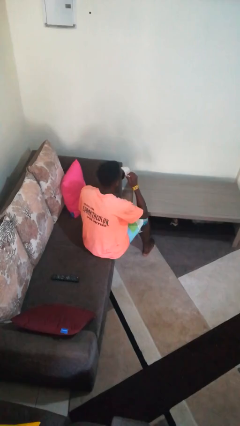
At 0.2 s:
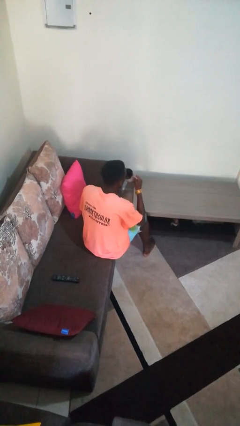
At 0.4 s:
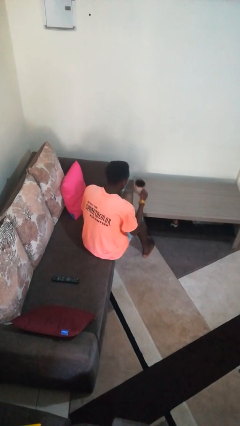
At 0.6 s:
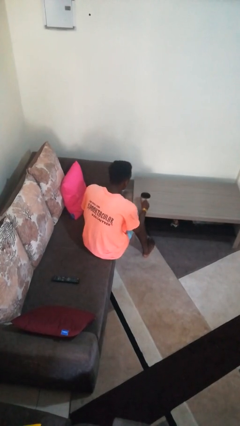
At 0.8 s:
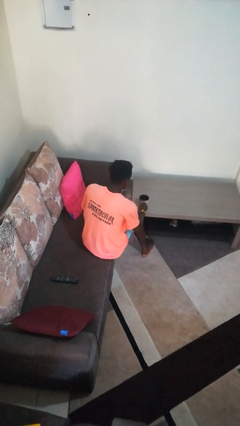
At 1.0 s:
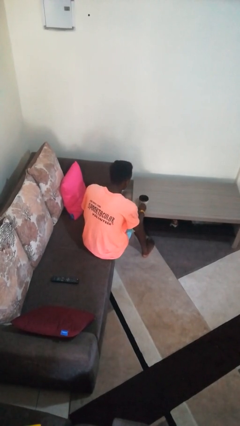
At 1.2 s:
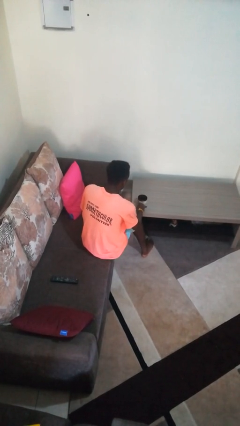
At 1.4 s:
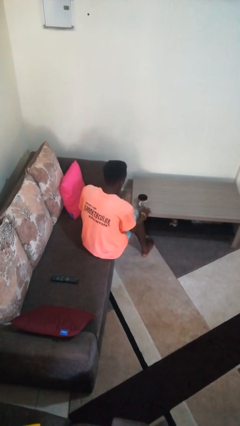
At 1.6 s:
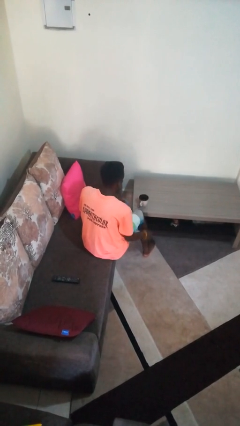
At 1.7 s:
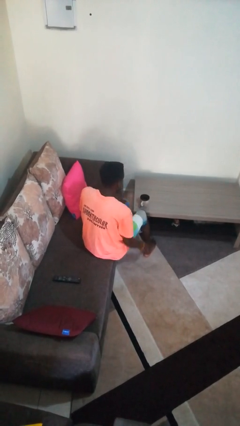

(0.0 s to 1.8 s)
person puts down object on table

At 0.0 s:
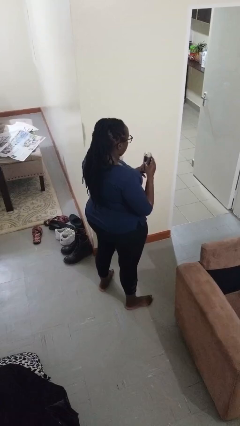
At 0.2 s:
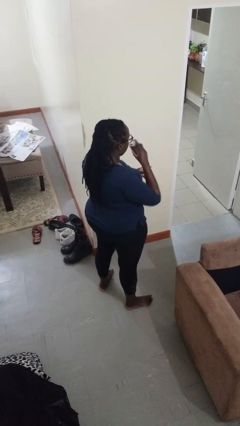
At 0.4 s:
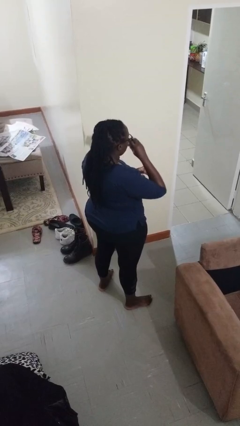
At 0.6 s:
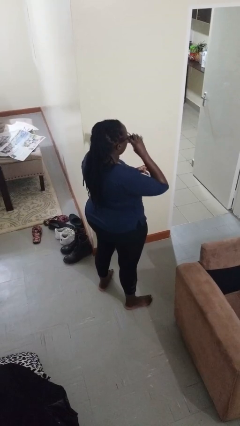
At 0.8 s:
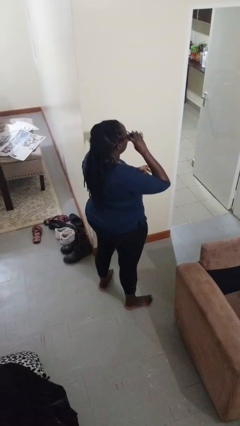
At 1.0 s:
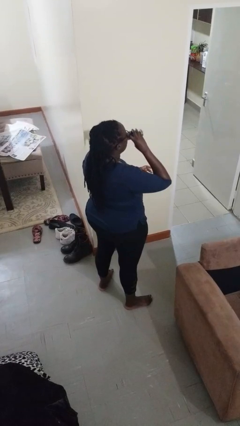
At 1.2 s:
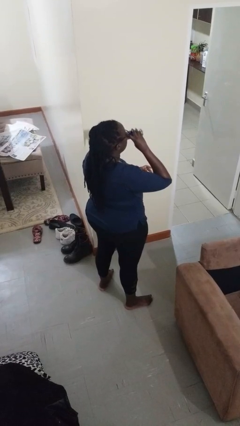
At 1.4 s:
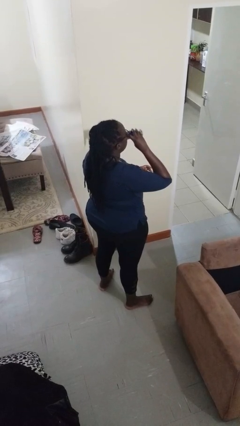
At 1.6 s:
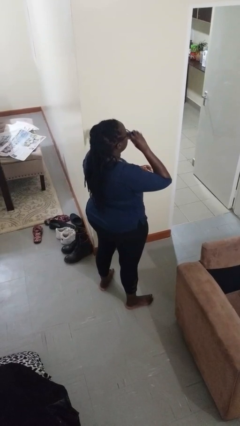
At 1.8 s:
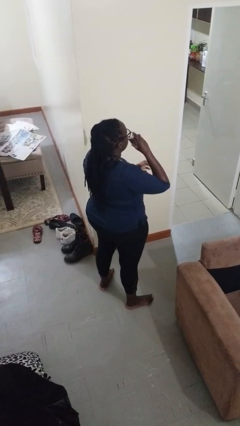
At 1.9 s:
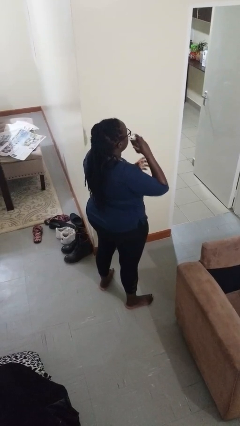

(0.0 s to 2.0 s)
person drinks from beverage can

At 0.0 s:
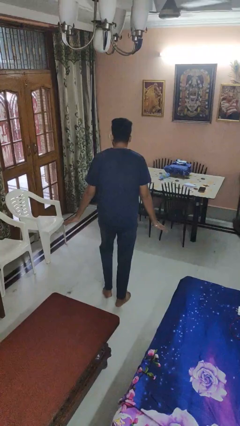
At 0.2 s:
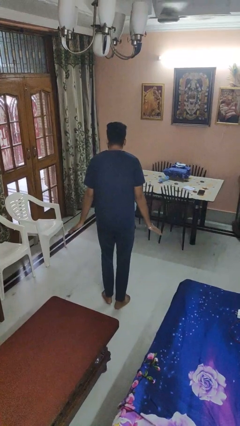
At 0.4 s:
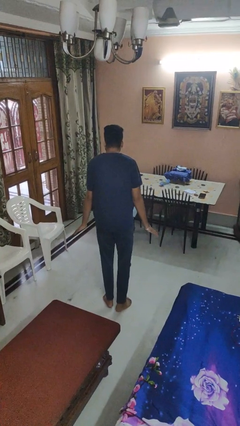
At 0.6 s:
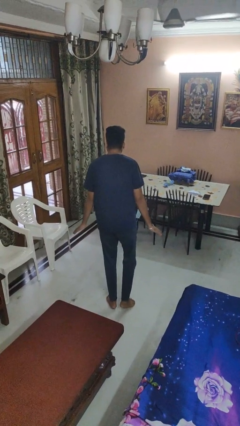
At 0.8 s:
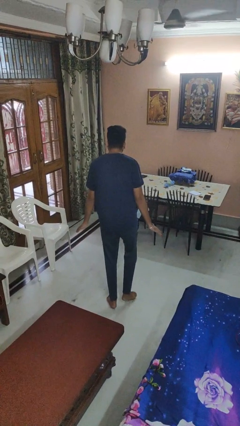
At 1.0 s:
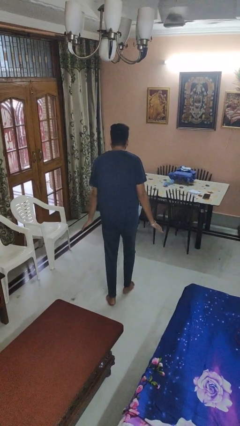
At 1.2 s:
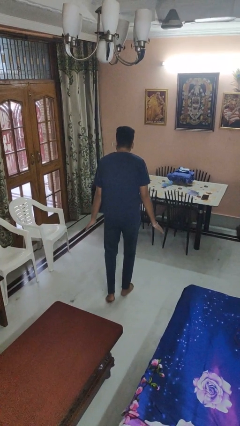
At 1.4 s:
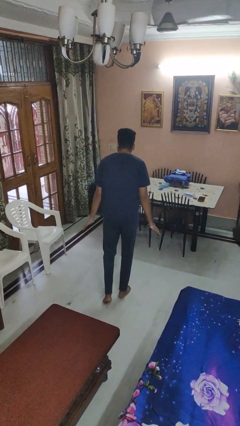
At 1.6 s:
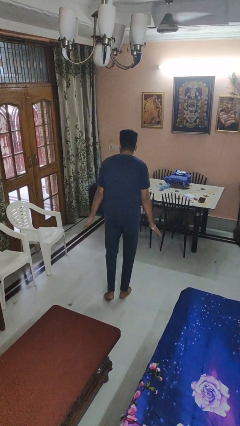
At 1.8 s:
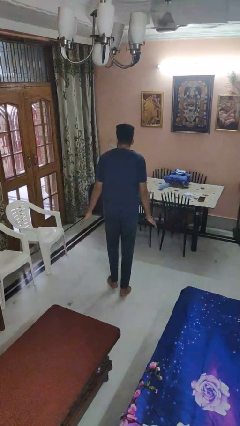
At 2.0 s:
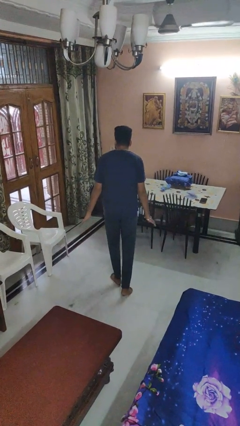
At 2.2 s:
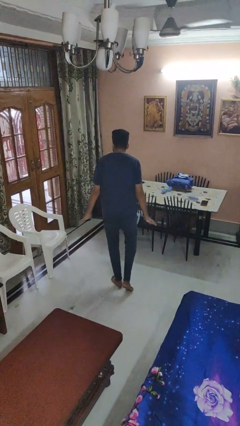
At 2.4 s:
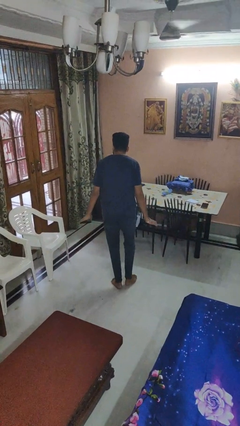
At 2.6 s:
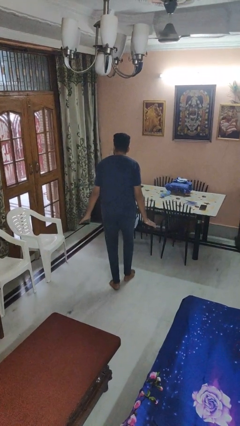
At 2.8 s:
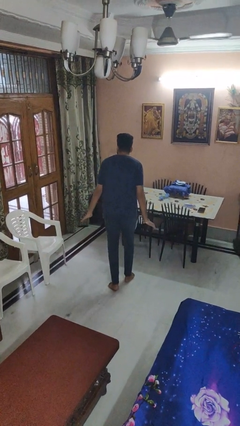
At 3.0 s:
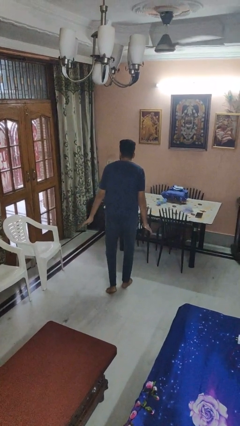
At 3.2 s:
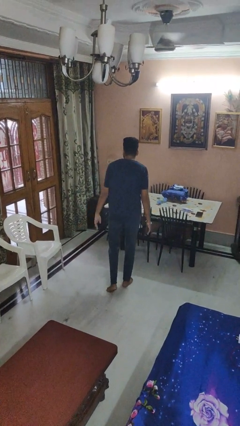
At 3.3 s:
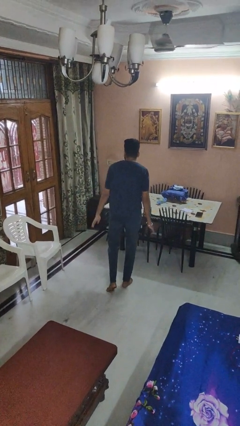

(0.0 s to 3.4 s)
person walks tiptoe

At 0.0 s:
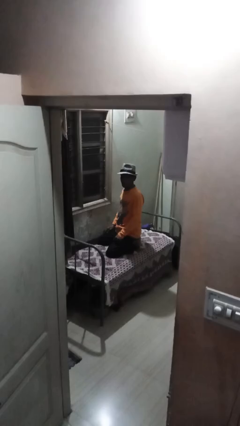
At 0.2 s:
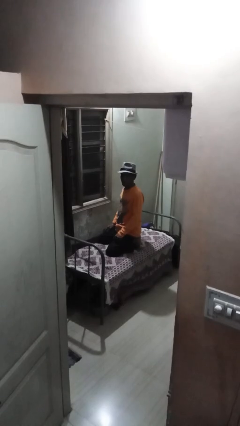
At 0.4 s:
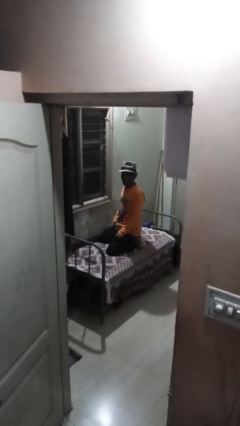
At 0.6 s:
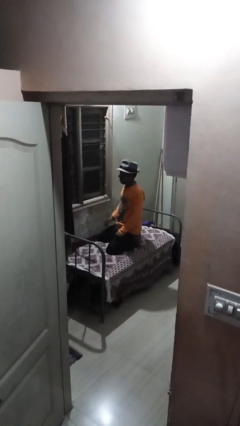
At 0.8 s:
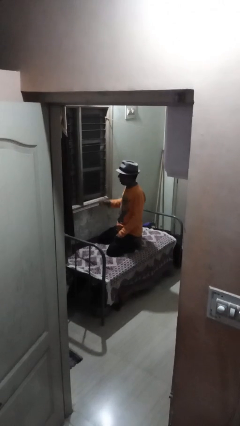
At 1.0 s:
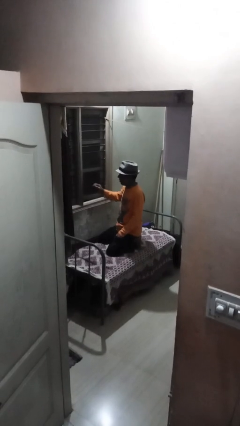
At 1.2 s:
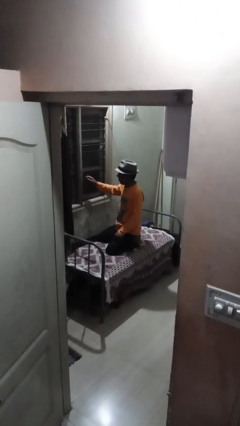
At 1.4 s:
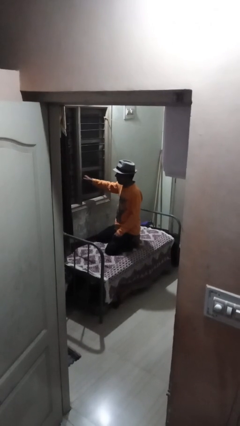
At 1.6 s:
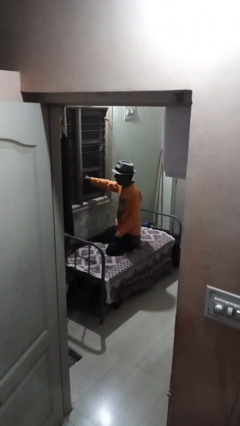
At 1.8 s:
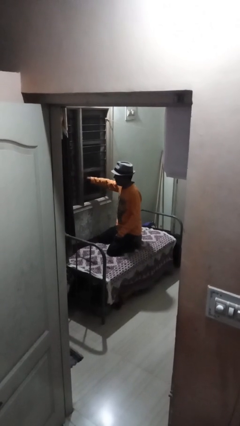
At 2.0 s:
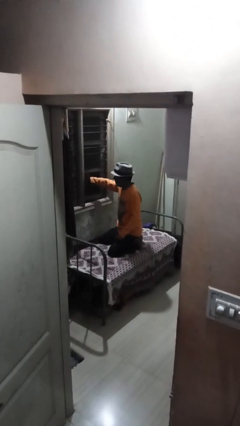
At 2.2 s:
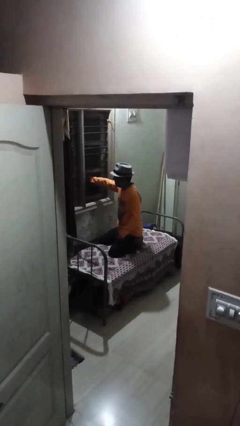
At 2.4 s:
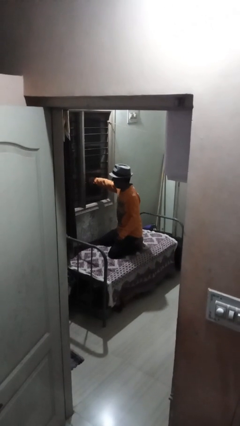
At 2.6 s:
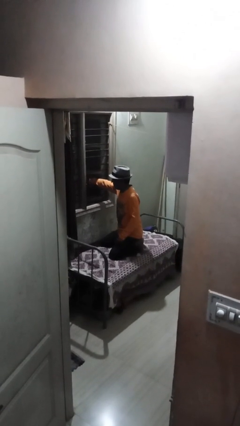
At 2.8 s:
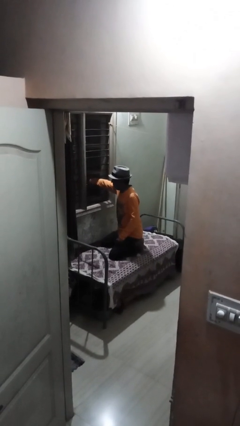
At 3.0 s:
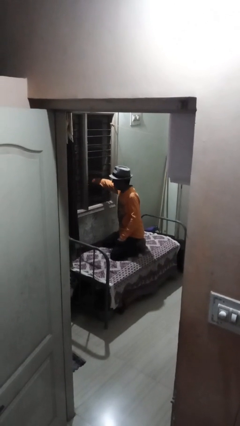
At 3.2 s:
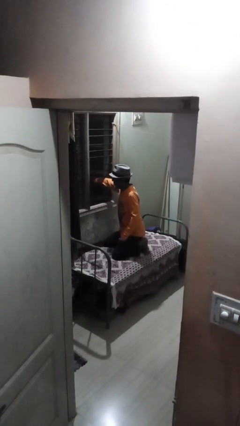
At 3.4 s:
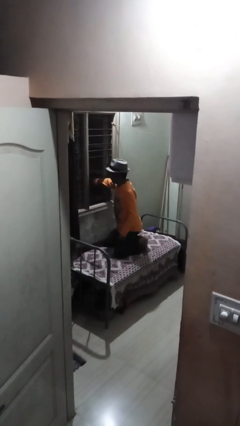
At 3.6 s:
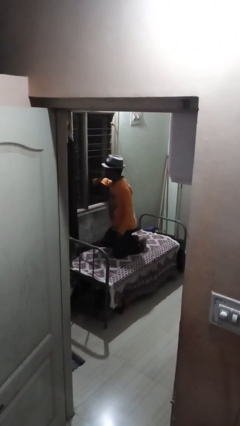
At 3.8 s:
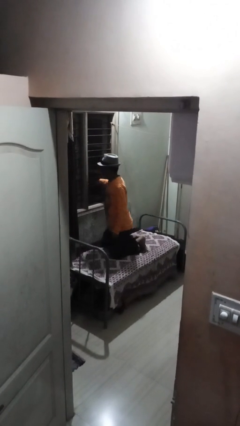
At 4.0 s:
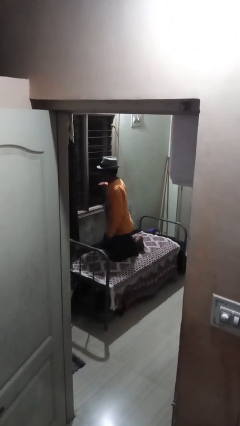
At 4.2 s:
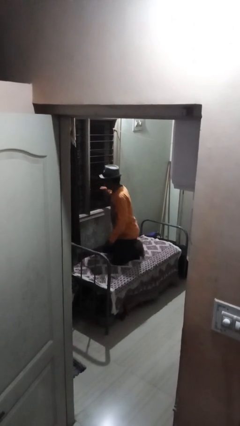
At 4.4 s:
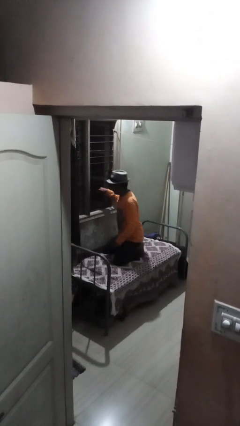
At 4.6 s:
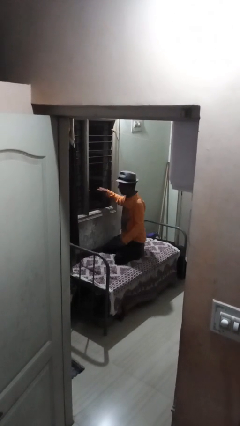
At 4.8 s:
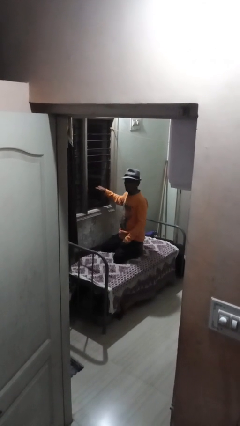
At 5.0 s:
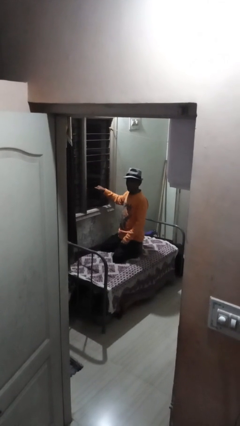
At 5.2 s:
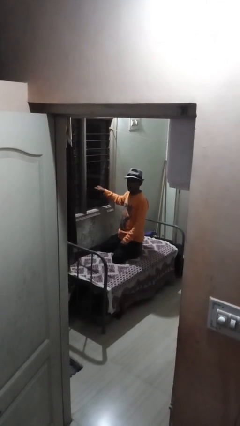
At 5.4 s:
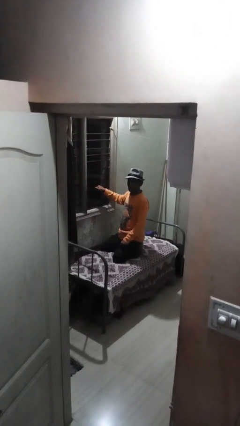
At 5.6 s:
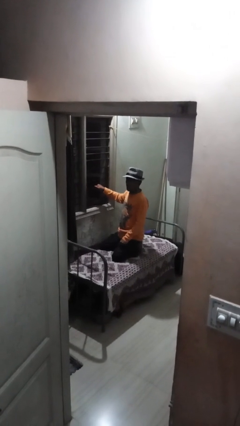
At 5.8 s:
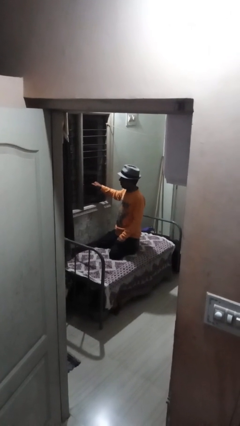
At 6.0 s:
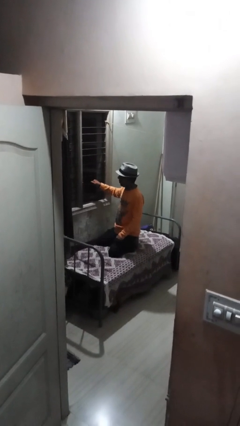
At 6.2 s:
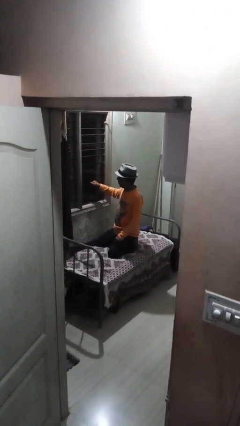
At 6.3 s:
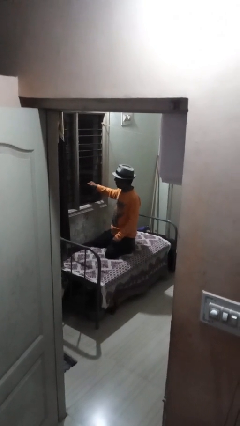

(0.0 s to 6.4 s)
person opens home window

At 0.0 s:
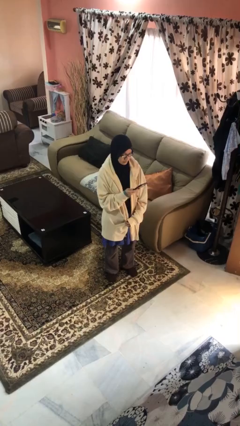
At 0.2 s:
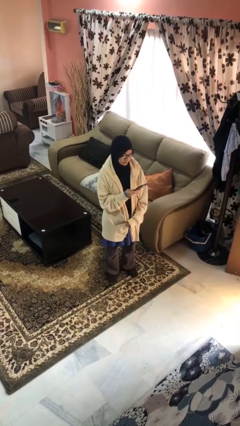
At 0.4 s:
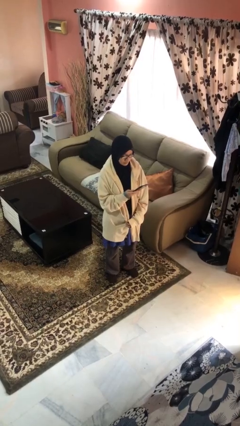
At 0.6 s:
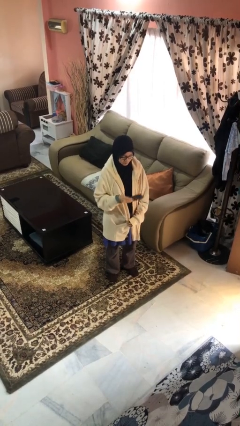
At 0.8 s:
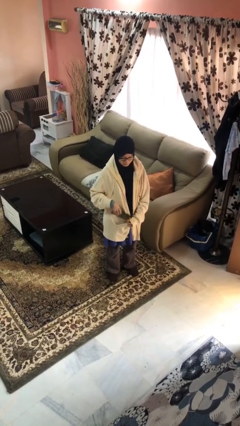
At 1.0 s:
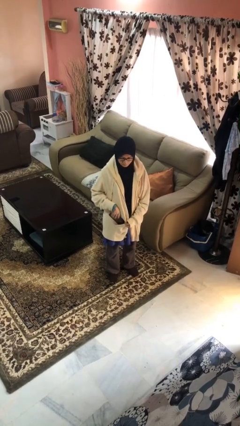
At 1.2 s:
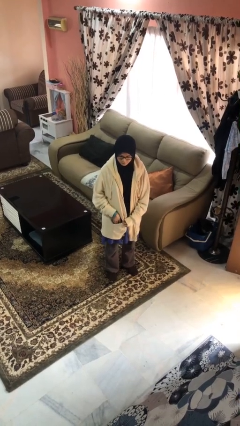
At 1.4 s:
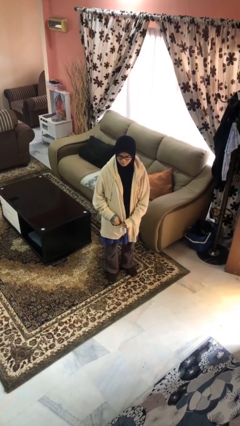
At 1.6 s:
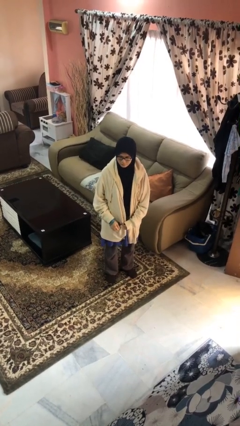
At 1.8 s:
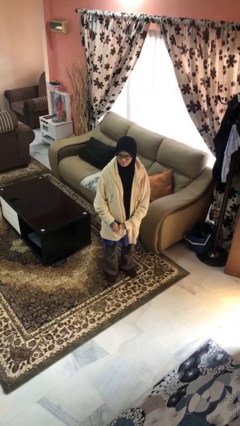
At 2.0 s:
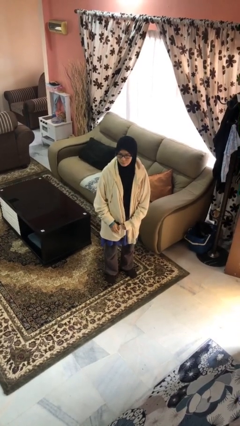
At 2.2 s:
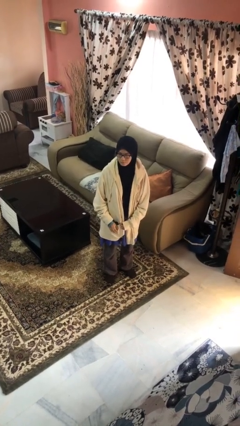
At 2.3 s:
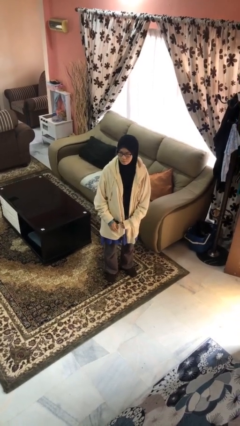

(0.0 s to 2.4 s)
person puts phone into pocket

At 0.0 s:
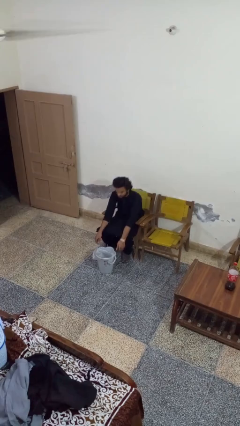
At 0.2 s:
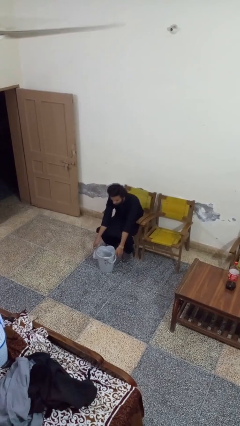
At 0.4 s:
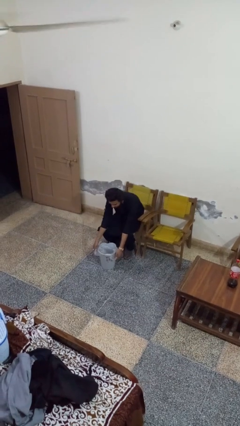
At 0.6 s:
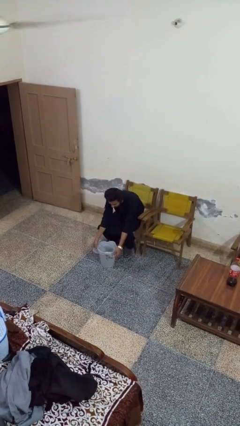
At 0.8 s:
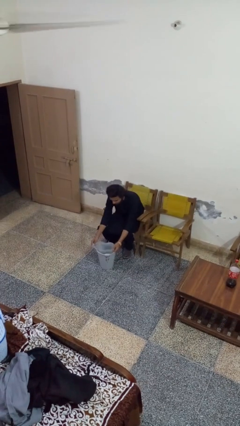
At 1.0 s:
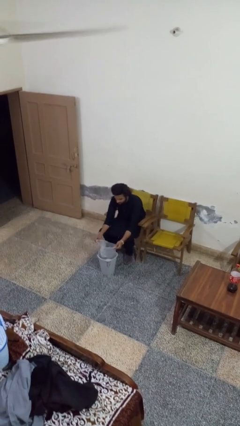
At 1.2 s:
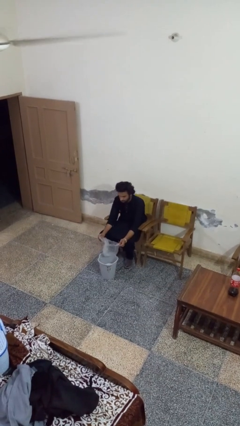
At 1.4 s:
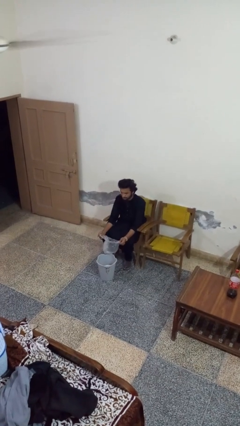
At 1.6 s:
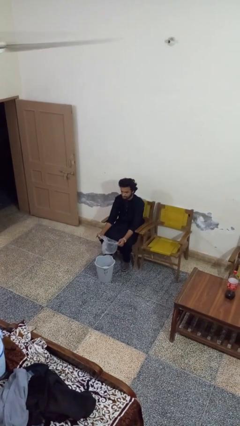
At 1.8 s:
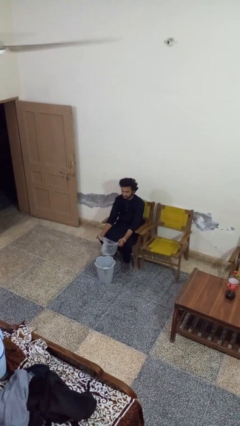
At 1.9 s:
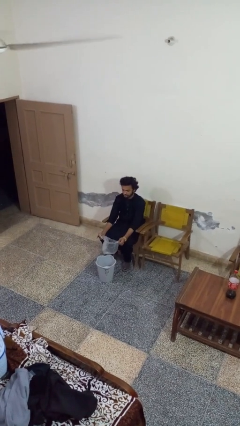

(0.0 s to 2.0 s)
person removes trashbag from trashcan
